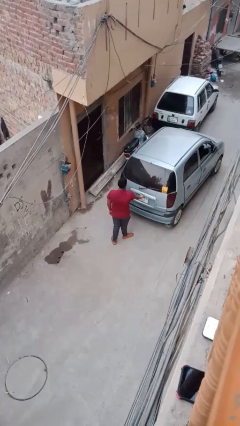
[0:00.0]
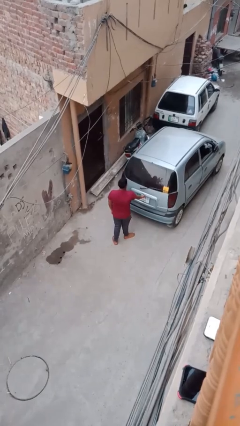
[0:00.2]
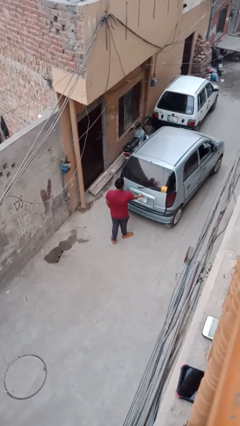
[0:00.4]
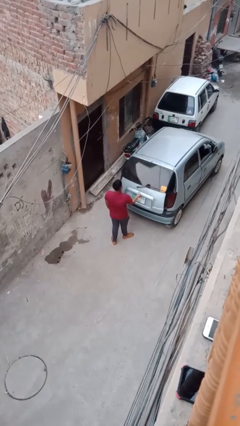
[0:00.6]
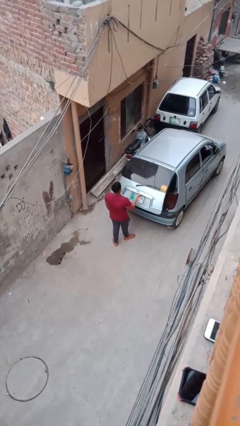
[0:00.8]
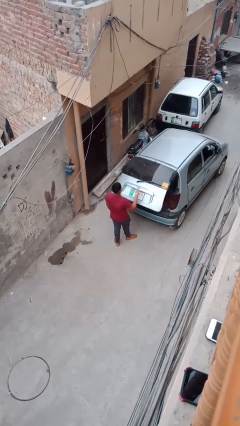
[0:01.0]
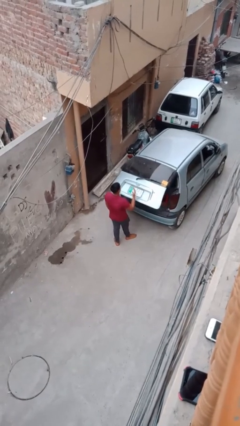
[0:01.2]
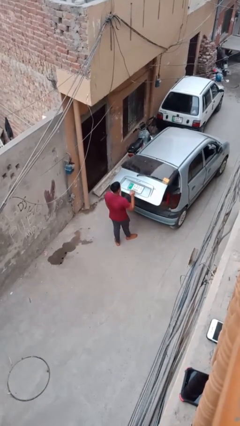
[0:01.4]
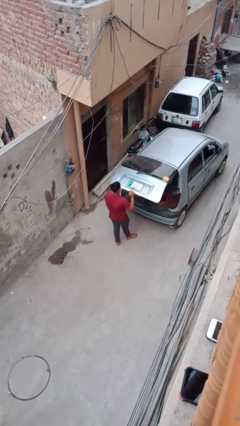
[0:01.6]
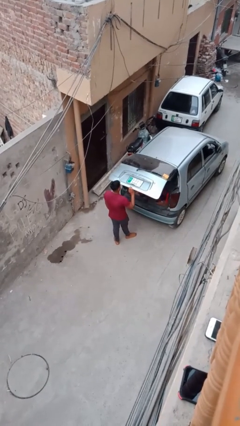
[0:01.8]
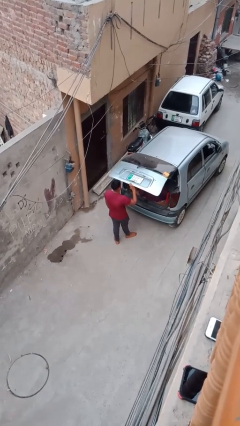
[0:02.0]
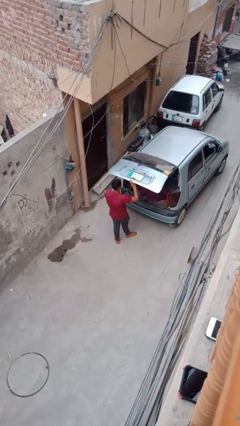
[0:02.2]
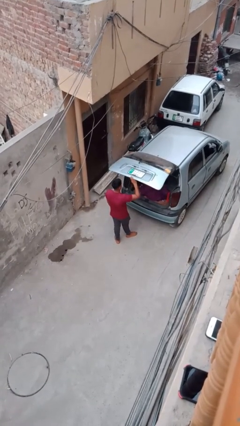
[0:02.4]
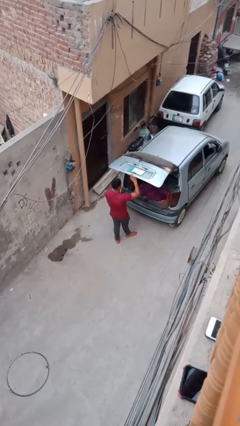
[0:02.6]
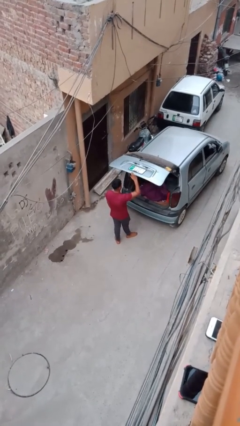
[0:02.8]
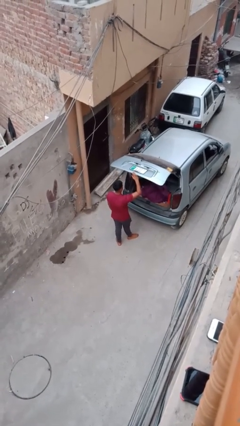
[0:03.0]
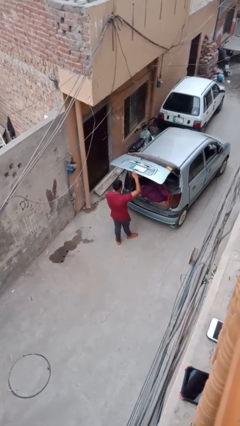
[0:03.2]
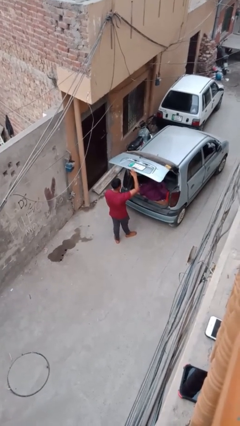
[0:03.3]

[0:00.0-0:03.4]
person opens car trunk

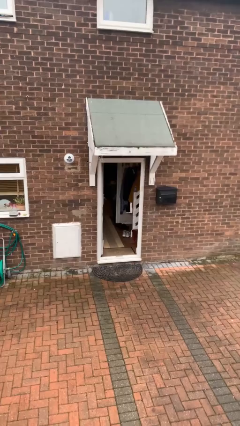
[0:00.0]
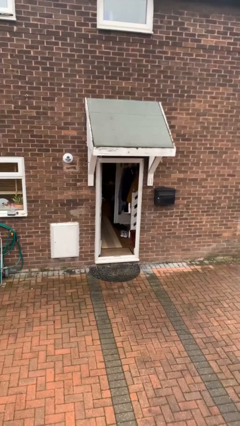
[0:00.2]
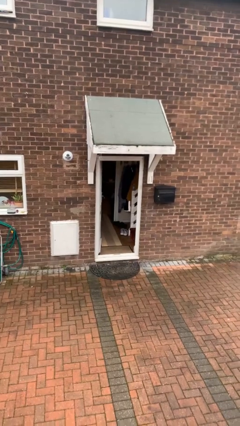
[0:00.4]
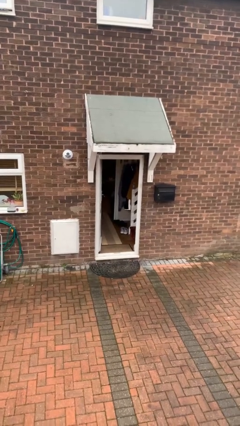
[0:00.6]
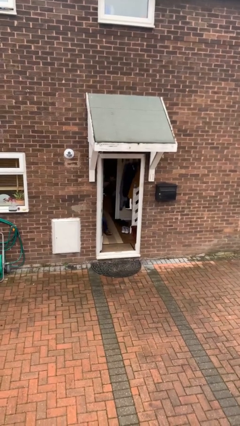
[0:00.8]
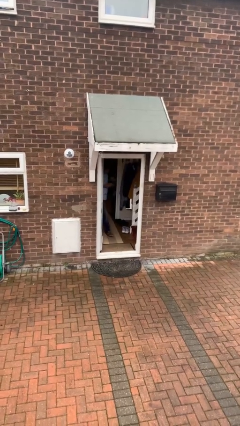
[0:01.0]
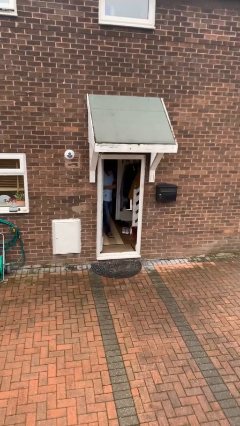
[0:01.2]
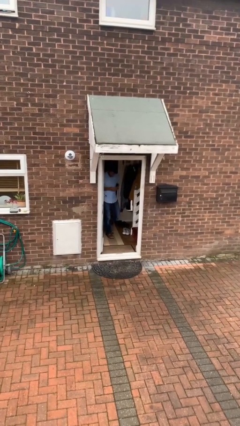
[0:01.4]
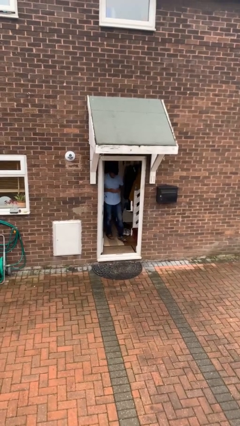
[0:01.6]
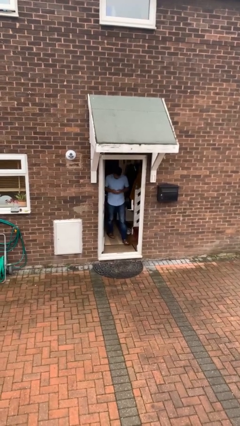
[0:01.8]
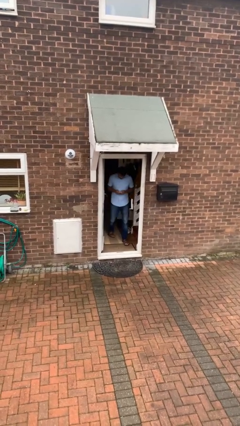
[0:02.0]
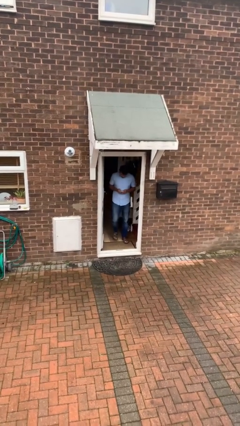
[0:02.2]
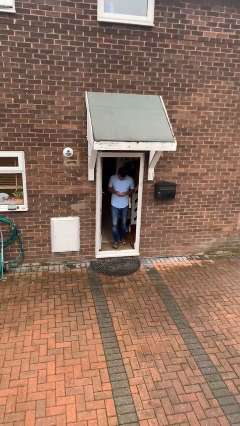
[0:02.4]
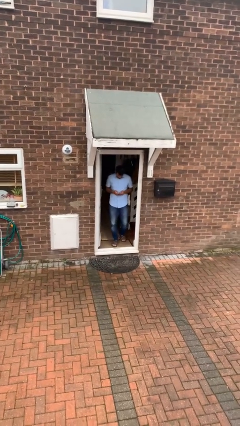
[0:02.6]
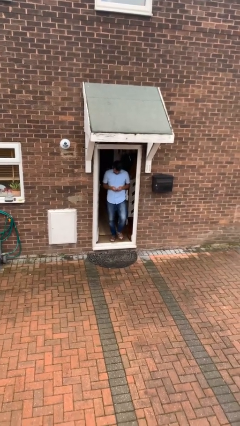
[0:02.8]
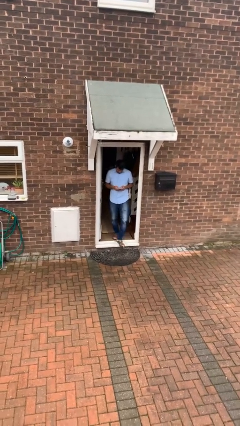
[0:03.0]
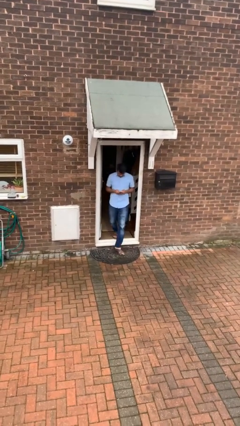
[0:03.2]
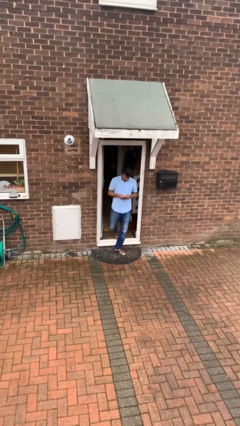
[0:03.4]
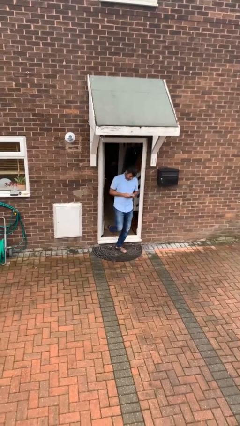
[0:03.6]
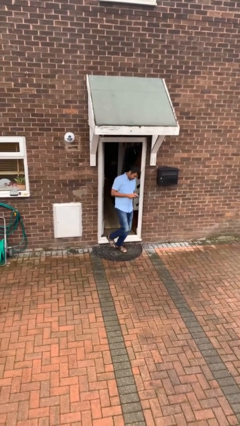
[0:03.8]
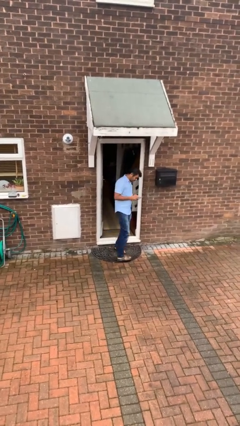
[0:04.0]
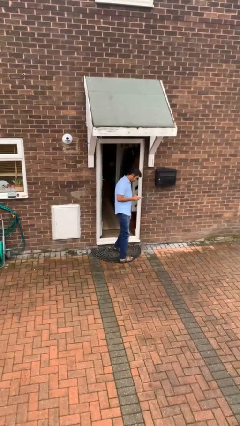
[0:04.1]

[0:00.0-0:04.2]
person enters scene through structure

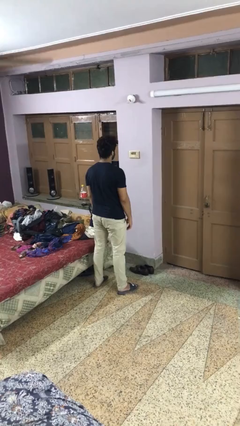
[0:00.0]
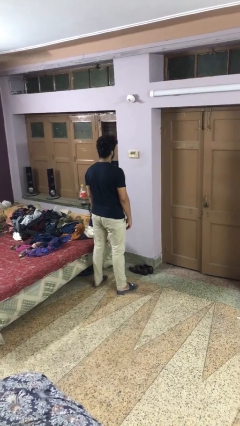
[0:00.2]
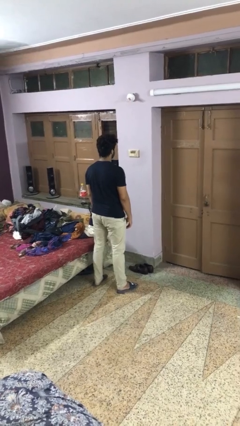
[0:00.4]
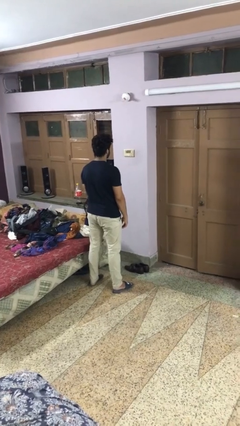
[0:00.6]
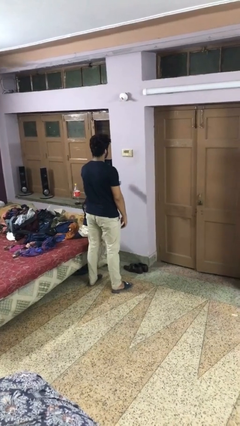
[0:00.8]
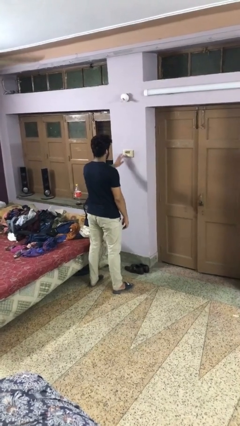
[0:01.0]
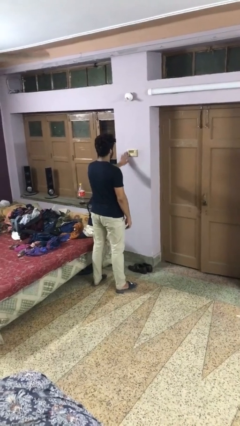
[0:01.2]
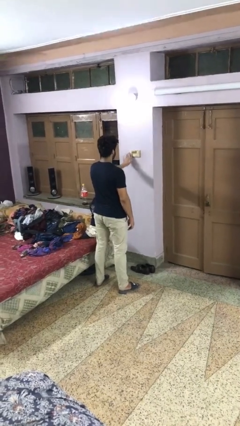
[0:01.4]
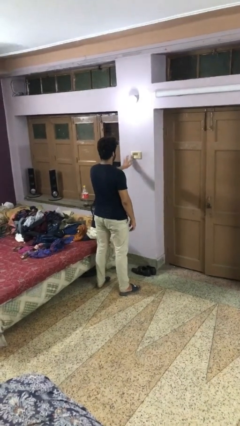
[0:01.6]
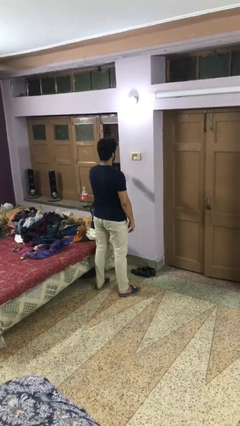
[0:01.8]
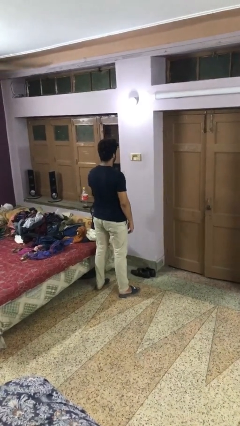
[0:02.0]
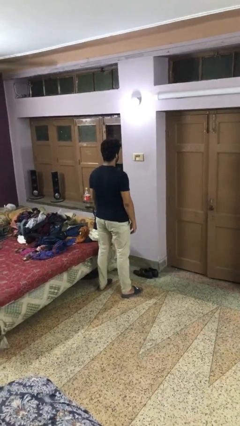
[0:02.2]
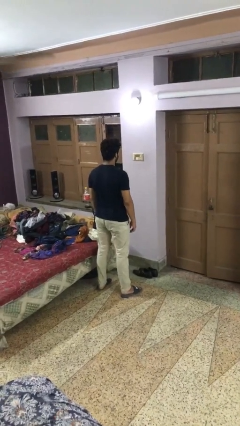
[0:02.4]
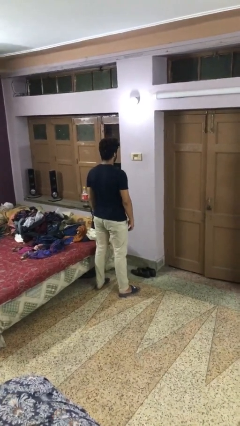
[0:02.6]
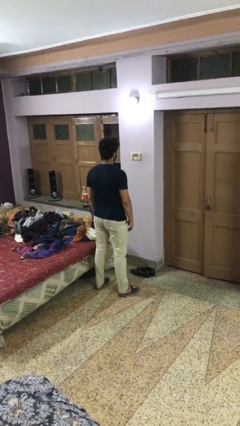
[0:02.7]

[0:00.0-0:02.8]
person turns on lamp

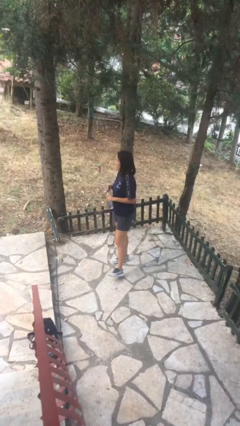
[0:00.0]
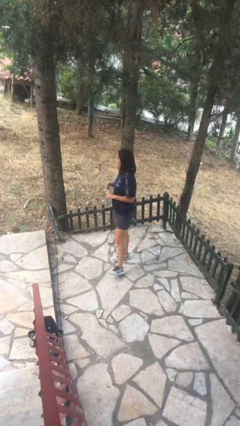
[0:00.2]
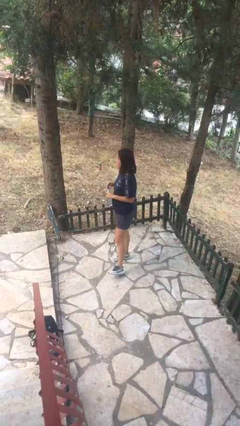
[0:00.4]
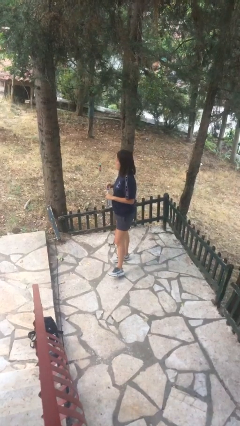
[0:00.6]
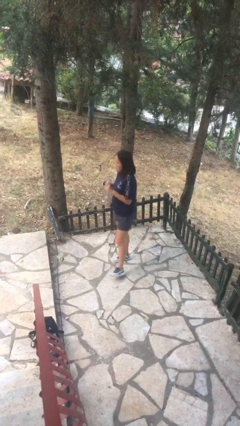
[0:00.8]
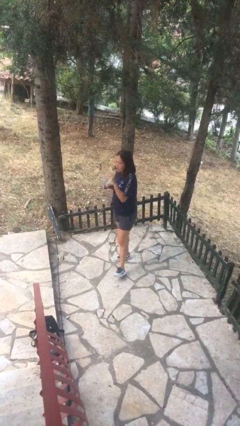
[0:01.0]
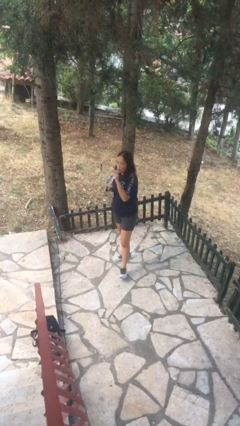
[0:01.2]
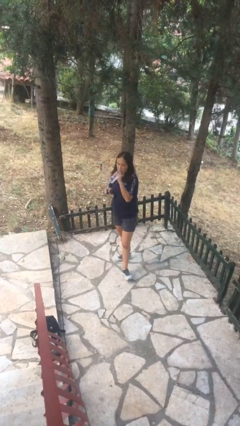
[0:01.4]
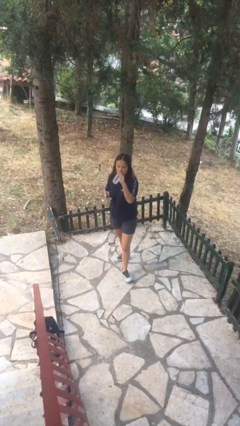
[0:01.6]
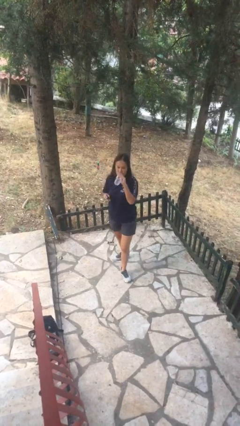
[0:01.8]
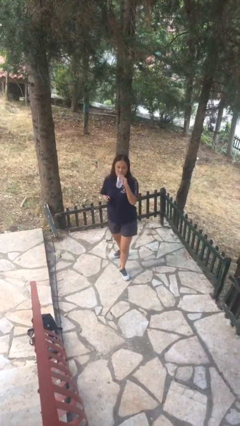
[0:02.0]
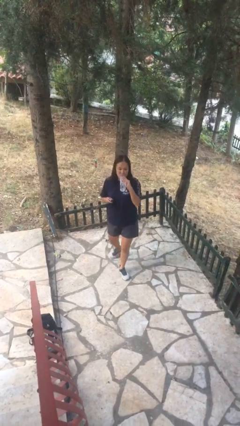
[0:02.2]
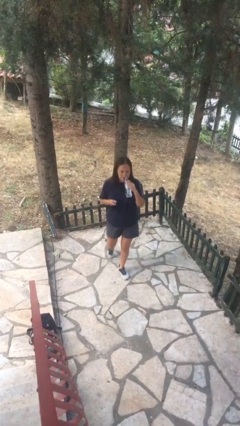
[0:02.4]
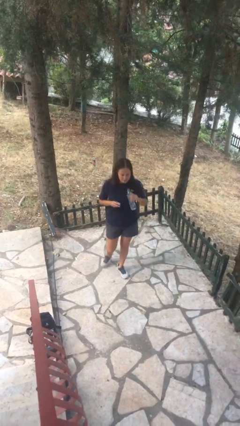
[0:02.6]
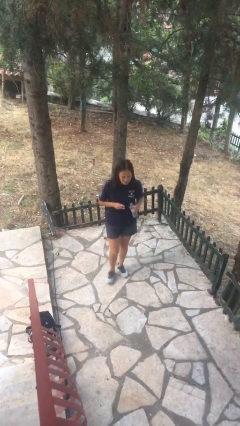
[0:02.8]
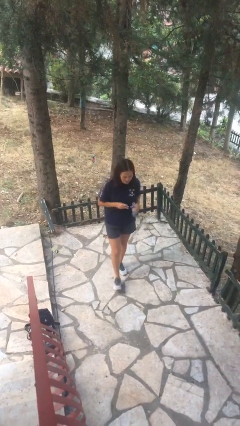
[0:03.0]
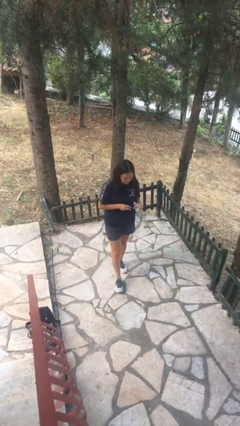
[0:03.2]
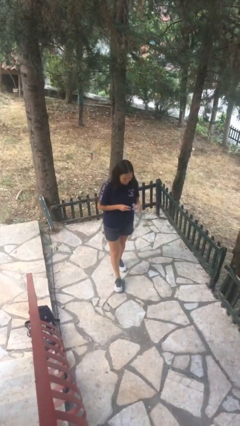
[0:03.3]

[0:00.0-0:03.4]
person drinks from bottle

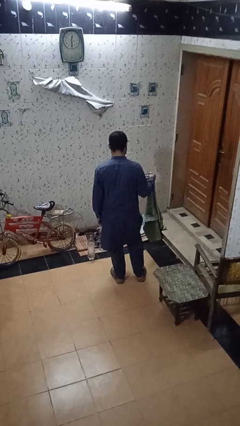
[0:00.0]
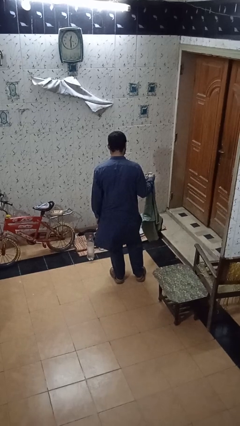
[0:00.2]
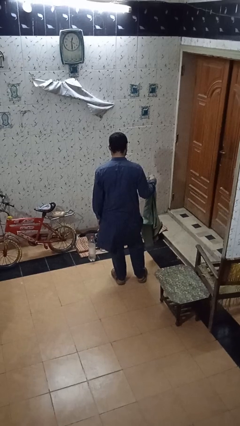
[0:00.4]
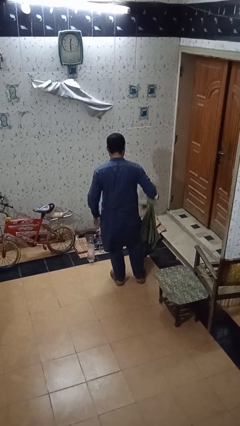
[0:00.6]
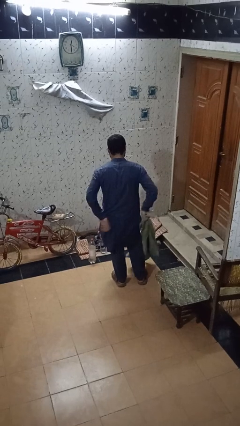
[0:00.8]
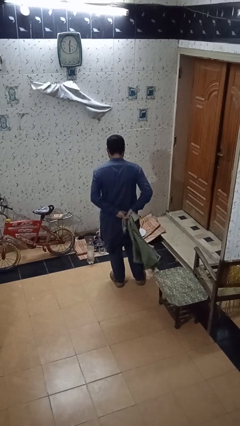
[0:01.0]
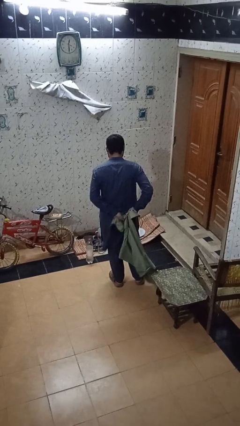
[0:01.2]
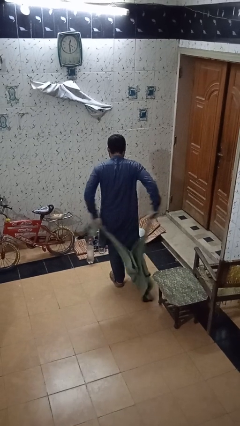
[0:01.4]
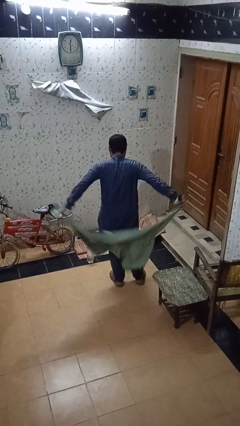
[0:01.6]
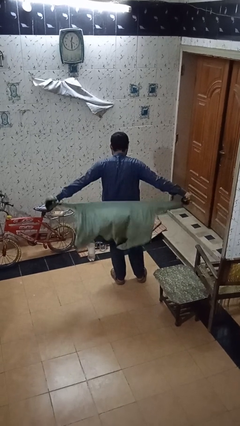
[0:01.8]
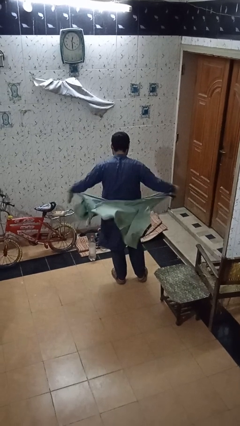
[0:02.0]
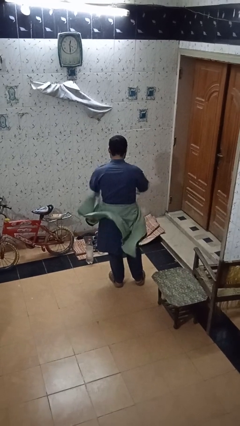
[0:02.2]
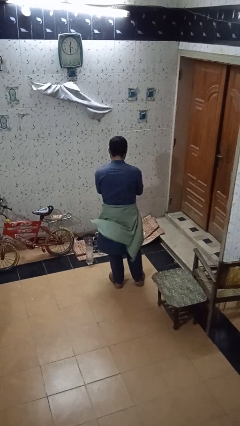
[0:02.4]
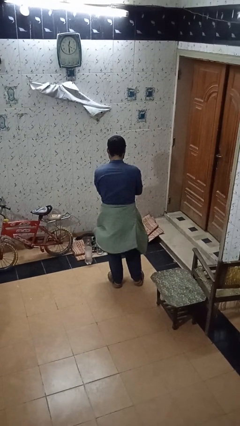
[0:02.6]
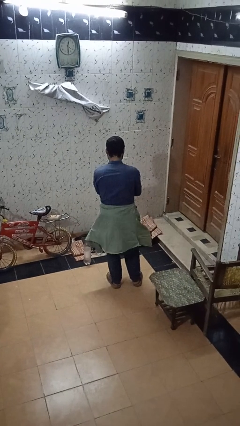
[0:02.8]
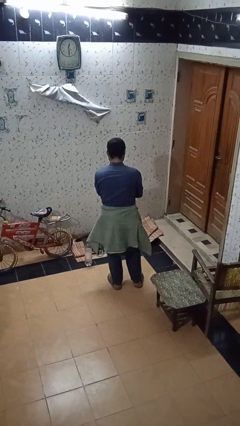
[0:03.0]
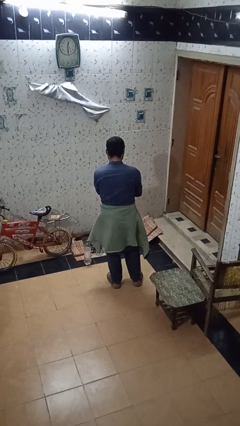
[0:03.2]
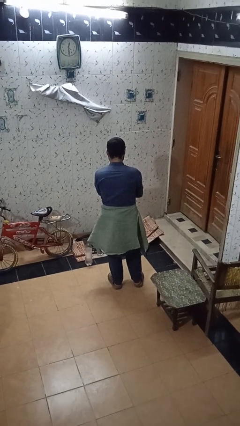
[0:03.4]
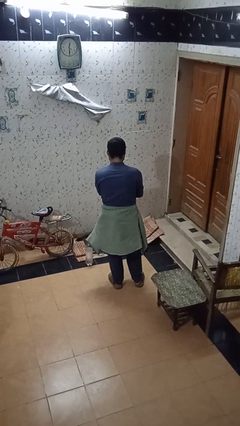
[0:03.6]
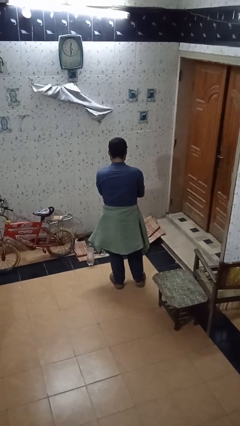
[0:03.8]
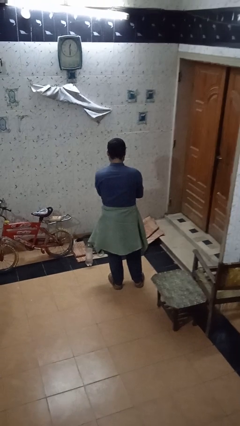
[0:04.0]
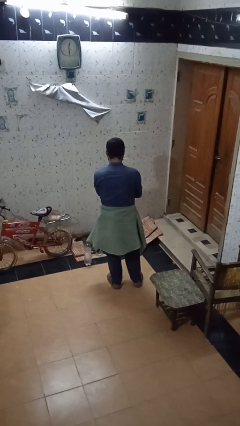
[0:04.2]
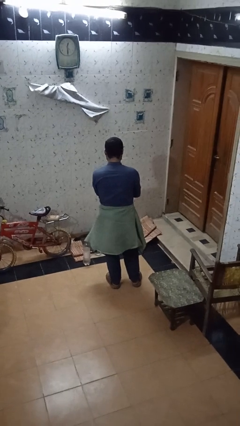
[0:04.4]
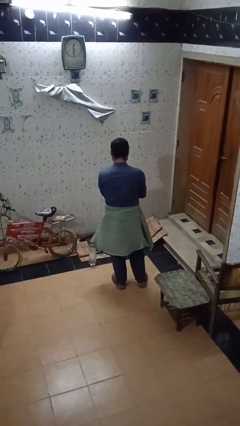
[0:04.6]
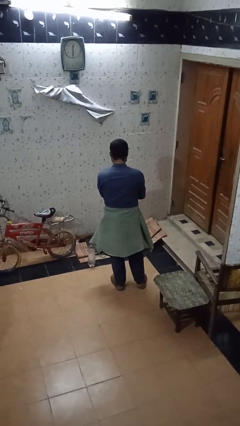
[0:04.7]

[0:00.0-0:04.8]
person ties jacket around waist
